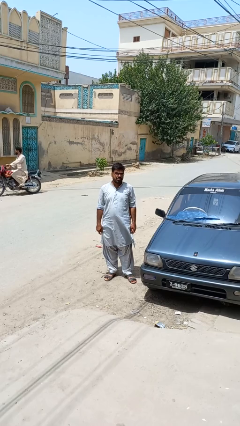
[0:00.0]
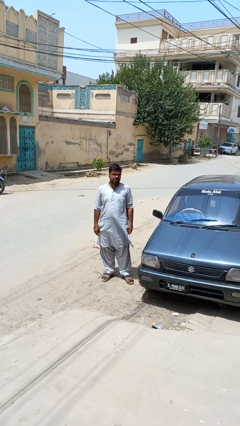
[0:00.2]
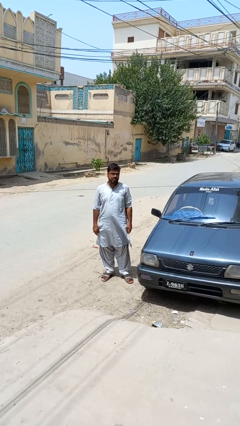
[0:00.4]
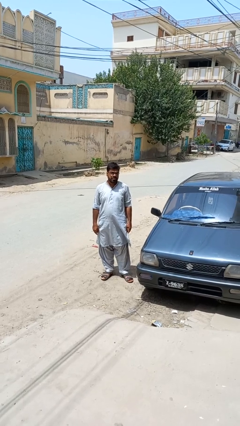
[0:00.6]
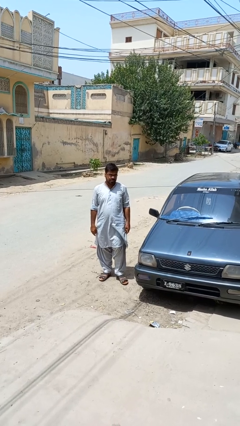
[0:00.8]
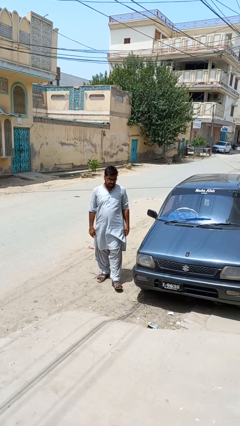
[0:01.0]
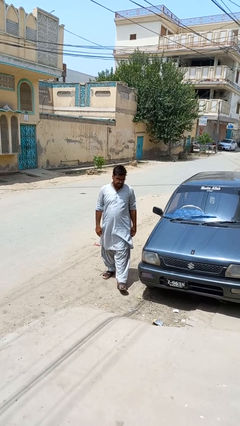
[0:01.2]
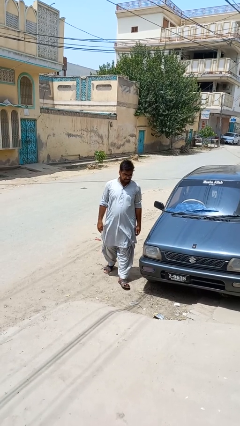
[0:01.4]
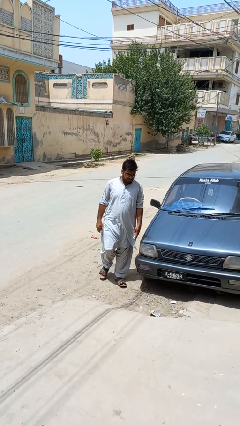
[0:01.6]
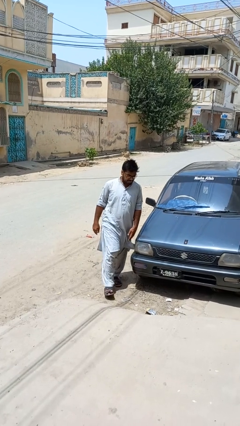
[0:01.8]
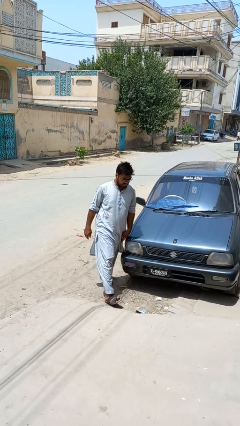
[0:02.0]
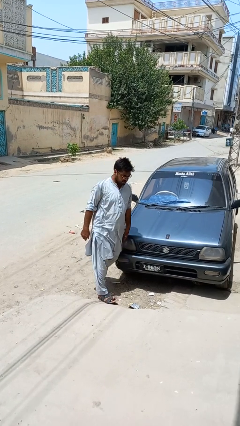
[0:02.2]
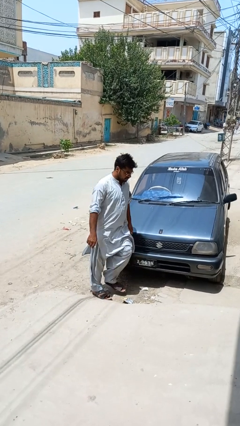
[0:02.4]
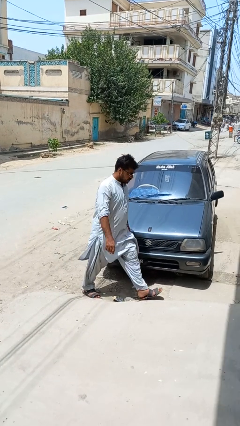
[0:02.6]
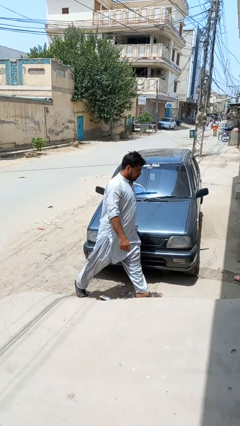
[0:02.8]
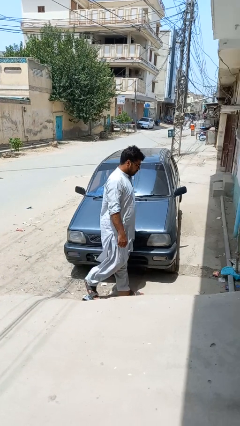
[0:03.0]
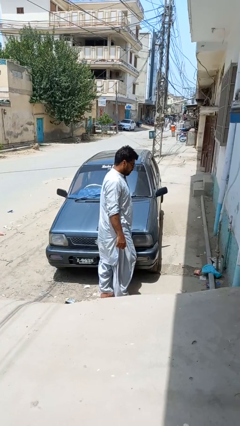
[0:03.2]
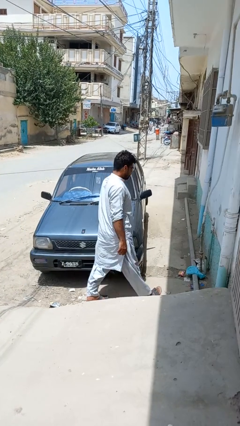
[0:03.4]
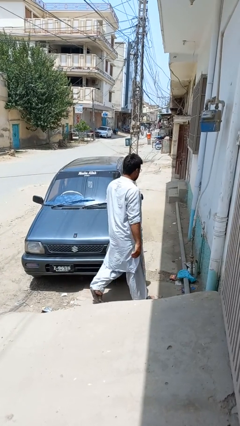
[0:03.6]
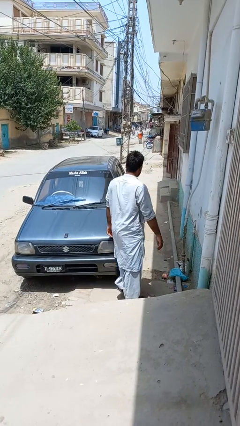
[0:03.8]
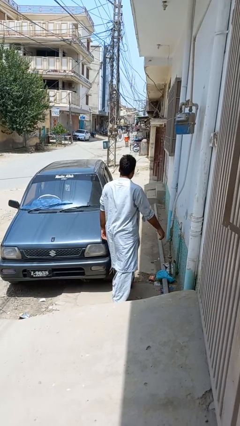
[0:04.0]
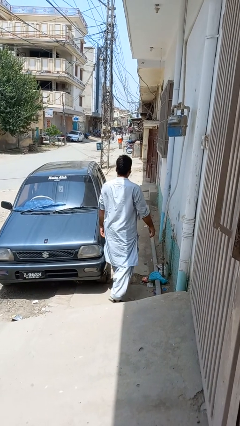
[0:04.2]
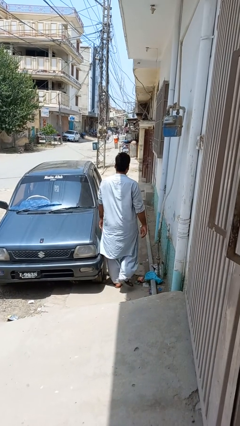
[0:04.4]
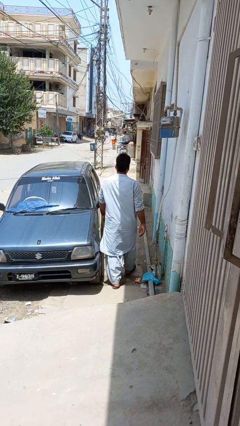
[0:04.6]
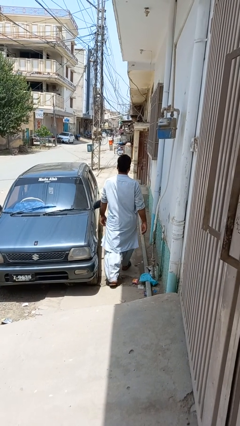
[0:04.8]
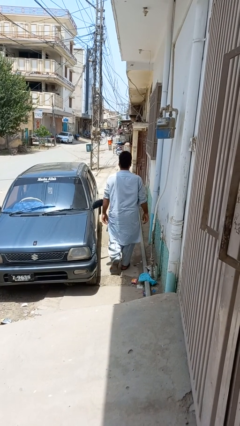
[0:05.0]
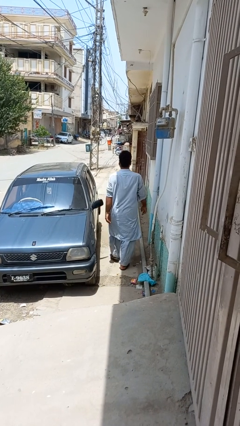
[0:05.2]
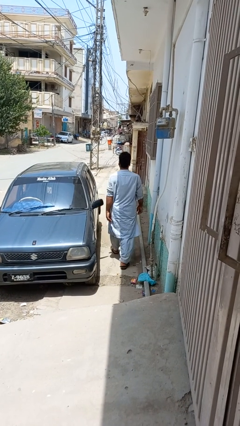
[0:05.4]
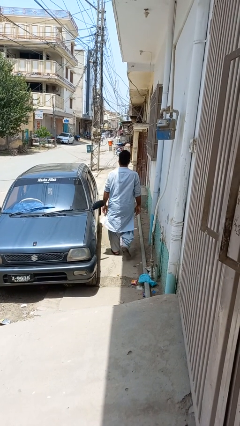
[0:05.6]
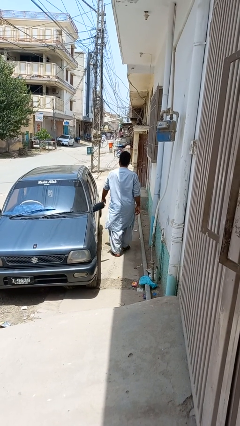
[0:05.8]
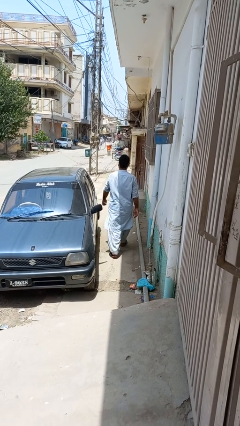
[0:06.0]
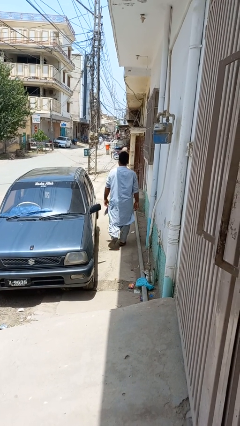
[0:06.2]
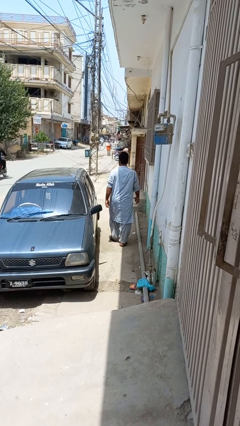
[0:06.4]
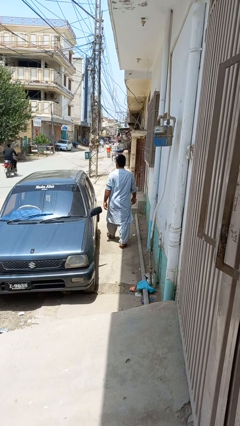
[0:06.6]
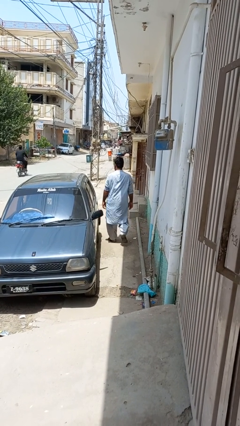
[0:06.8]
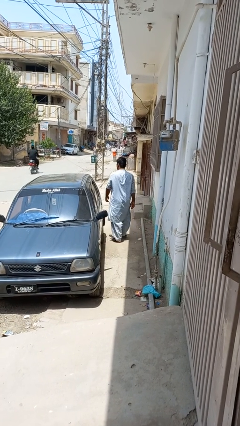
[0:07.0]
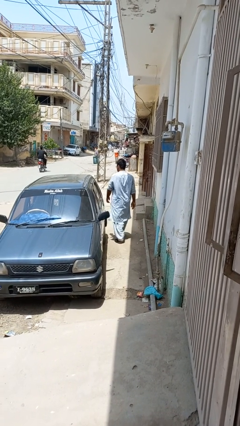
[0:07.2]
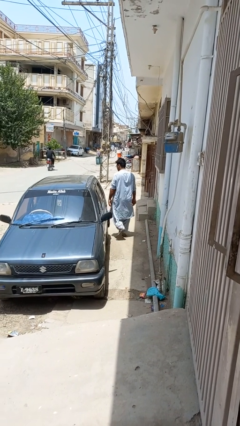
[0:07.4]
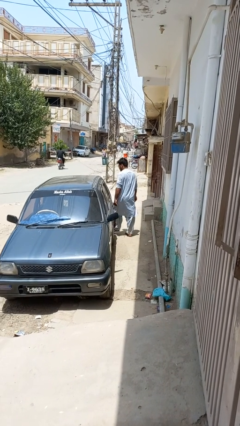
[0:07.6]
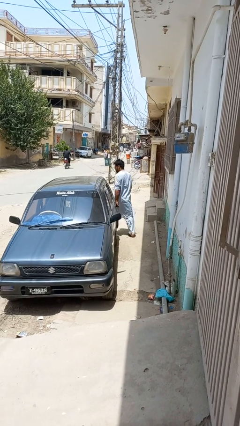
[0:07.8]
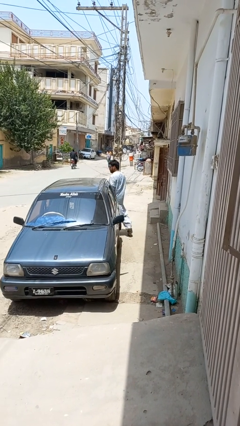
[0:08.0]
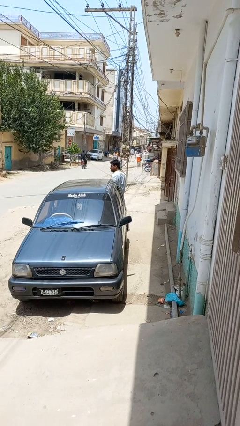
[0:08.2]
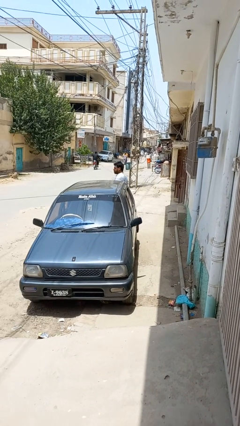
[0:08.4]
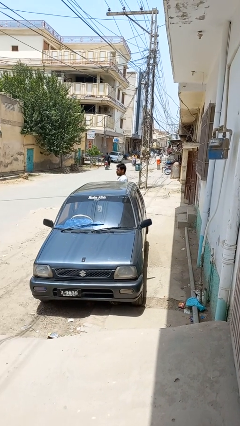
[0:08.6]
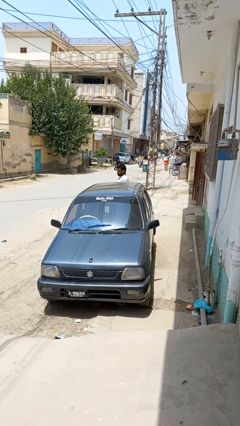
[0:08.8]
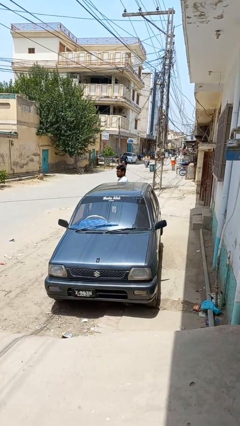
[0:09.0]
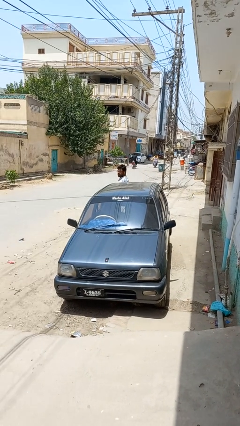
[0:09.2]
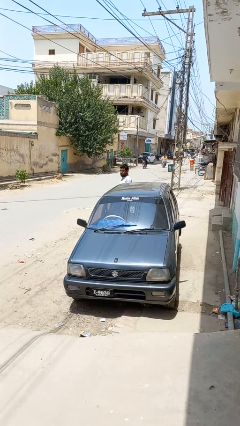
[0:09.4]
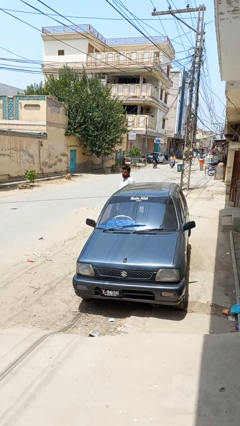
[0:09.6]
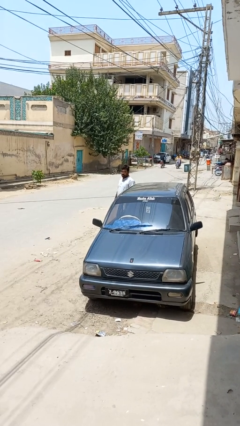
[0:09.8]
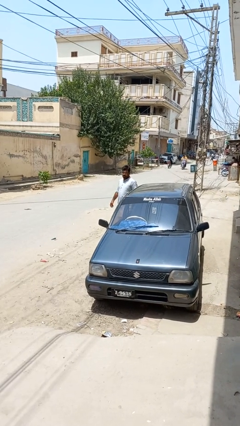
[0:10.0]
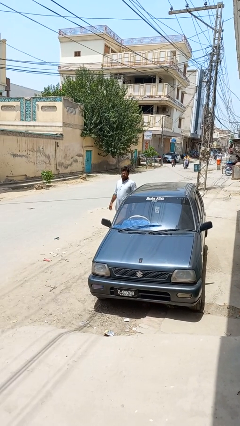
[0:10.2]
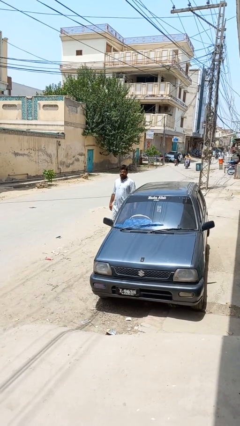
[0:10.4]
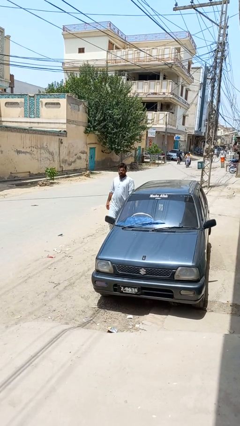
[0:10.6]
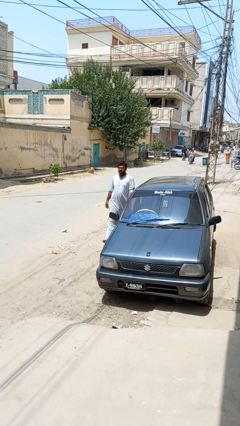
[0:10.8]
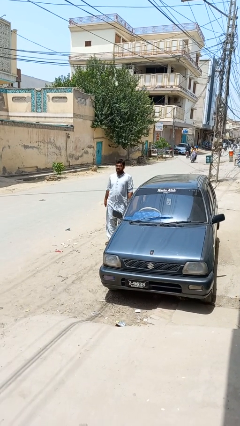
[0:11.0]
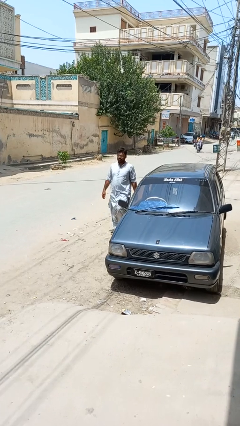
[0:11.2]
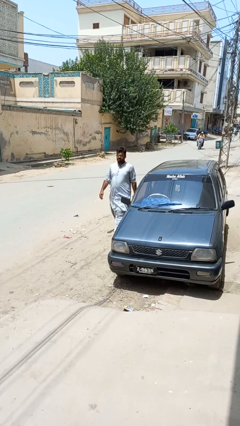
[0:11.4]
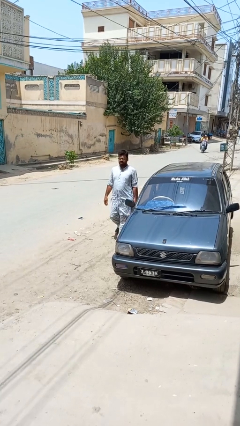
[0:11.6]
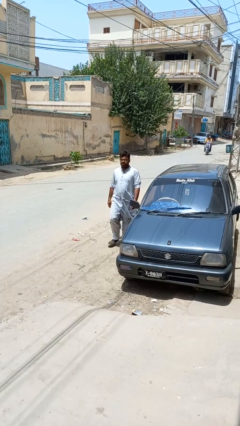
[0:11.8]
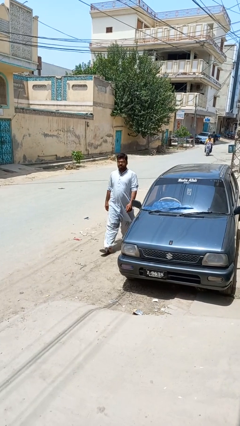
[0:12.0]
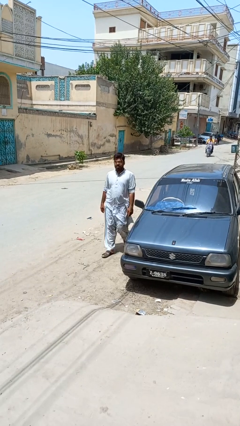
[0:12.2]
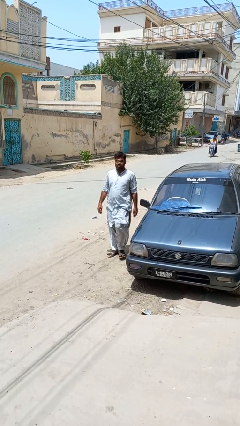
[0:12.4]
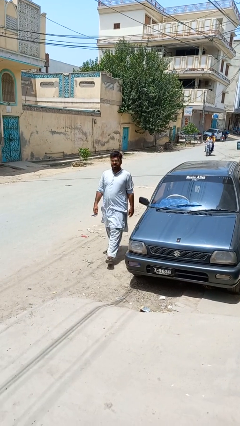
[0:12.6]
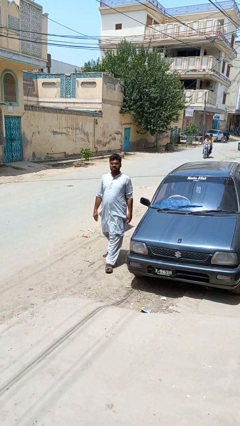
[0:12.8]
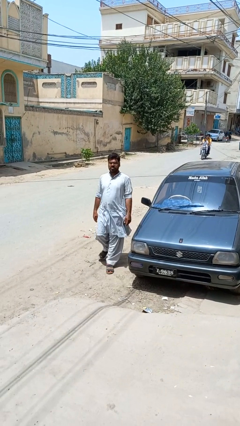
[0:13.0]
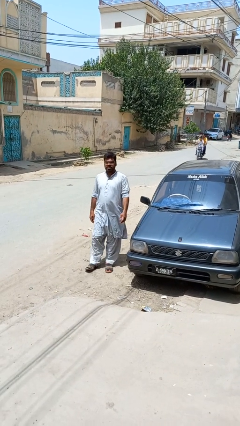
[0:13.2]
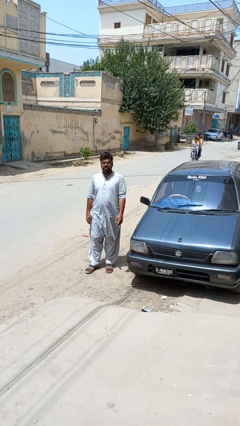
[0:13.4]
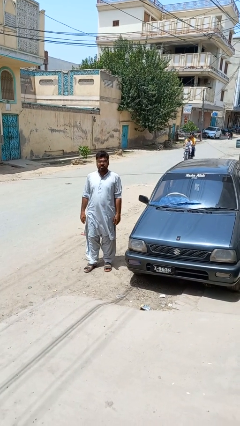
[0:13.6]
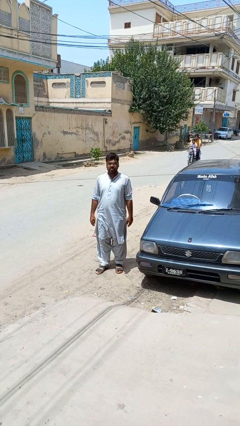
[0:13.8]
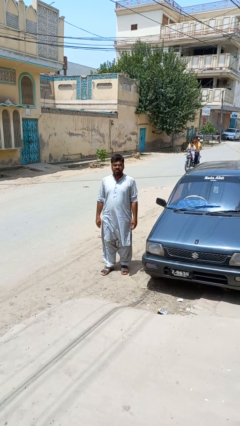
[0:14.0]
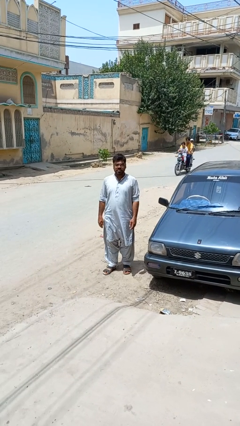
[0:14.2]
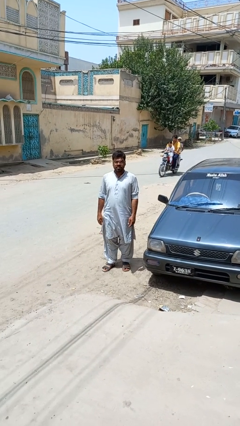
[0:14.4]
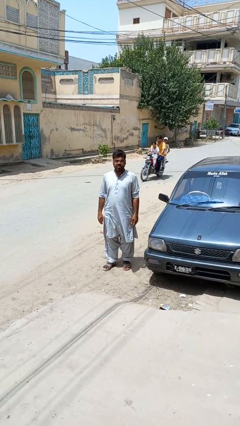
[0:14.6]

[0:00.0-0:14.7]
person walks around car

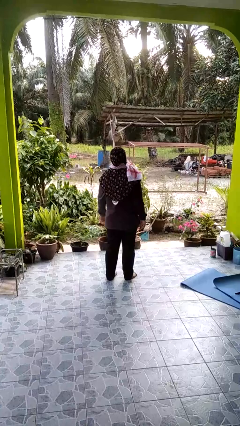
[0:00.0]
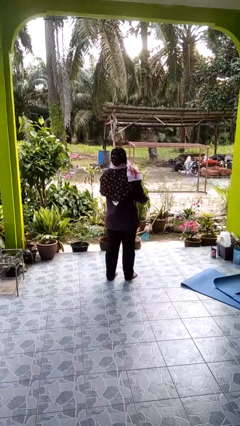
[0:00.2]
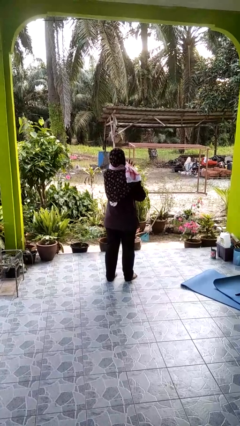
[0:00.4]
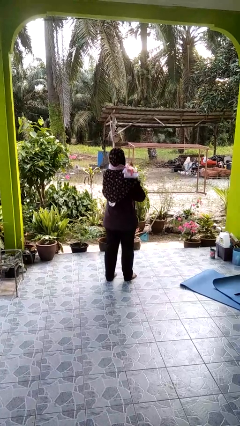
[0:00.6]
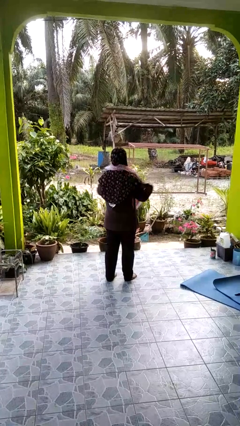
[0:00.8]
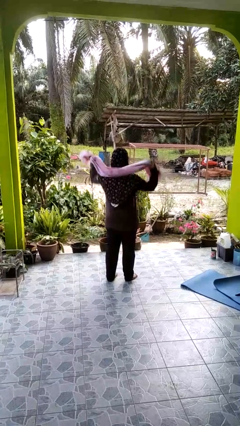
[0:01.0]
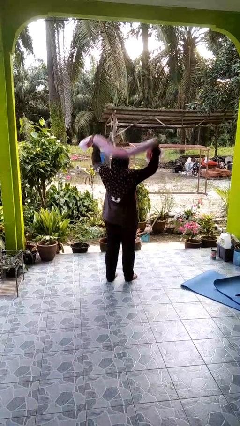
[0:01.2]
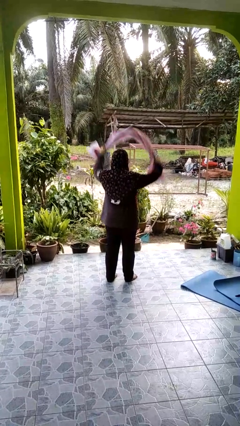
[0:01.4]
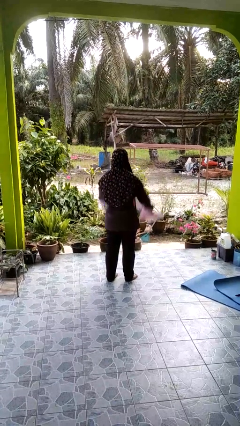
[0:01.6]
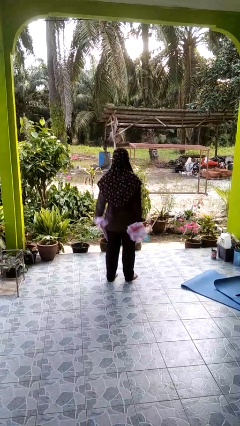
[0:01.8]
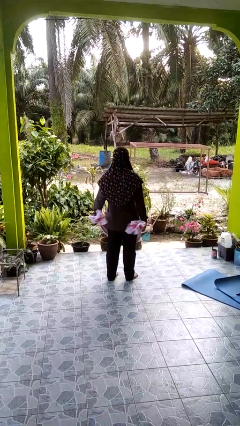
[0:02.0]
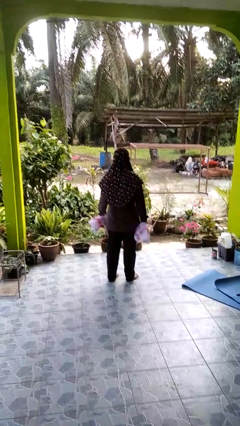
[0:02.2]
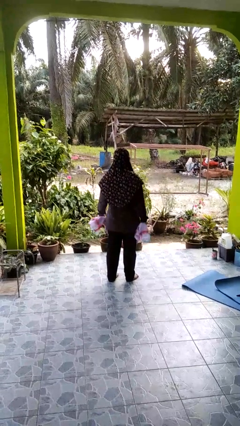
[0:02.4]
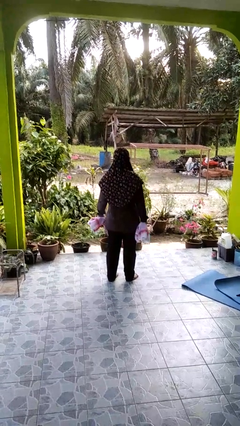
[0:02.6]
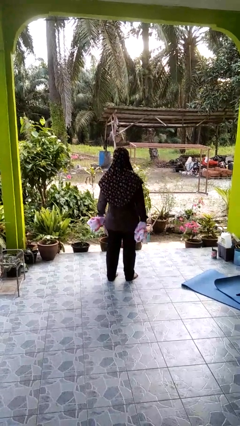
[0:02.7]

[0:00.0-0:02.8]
person takes off scarf

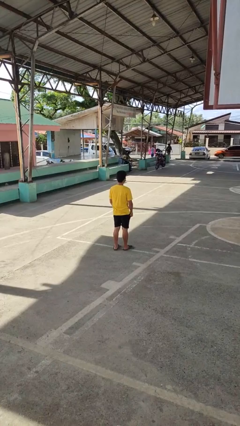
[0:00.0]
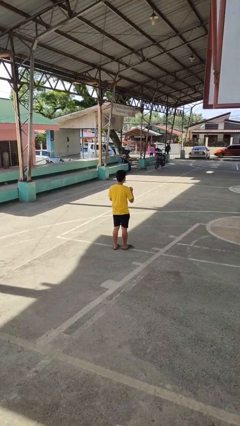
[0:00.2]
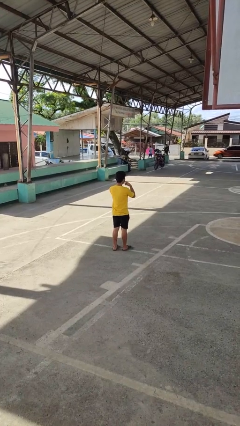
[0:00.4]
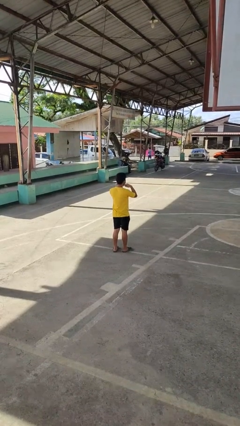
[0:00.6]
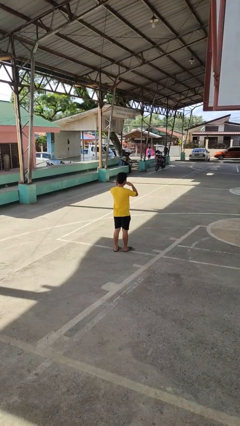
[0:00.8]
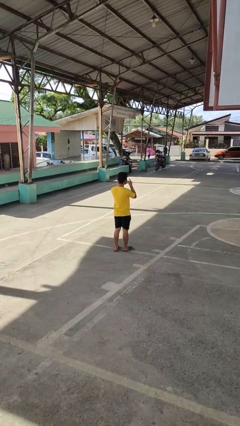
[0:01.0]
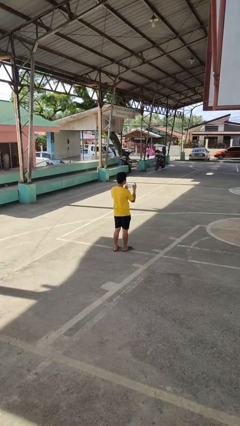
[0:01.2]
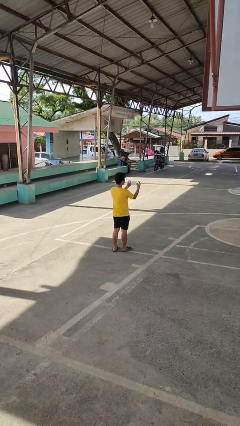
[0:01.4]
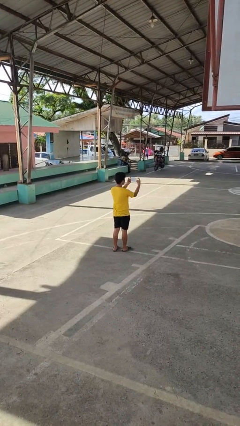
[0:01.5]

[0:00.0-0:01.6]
person takes off facemask
